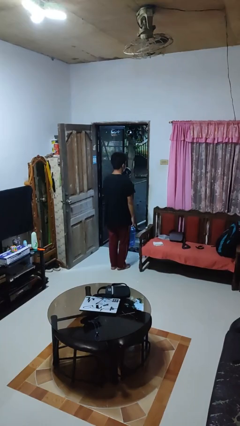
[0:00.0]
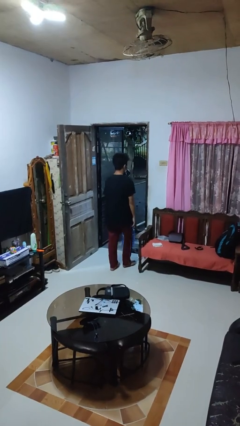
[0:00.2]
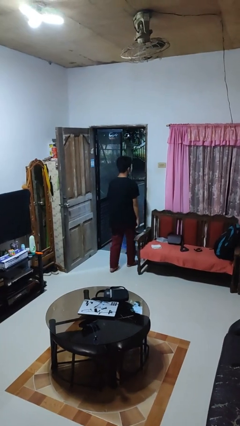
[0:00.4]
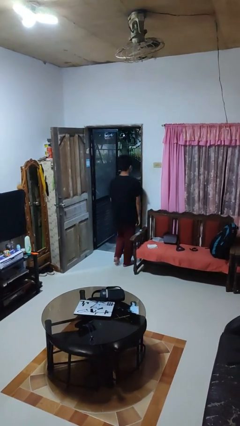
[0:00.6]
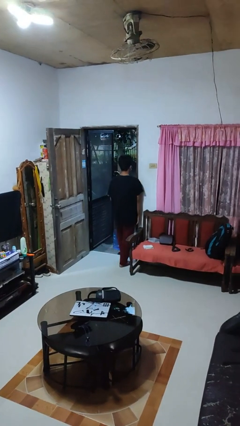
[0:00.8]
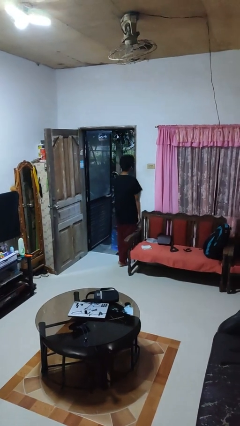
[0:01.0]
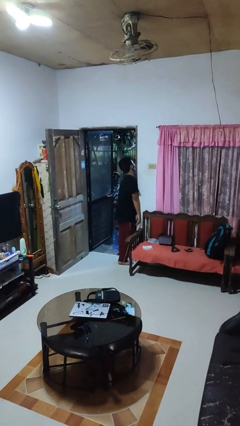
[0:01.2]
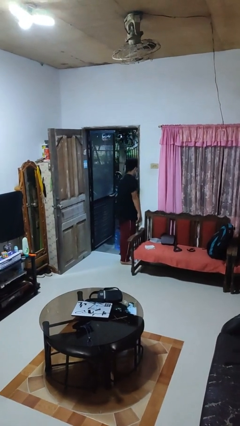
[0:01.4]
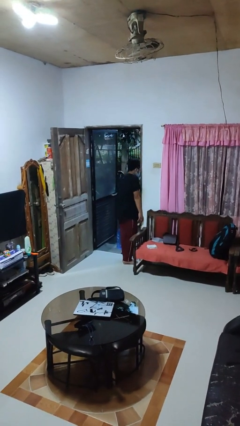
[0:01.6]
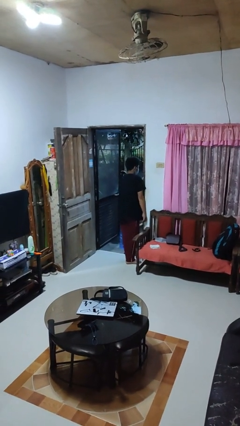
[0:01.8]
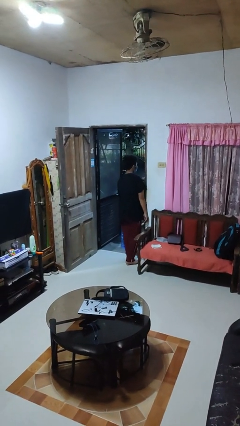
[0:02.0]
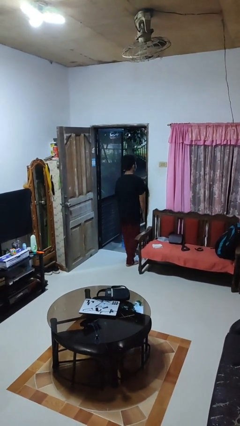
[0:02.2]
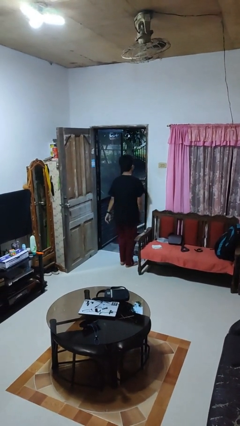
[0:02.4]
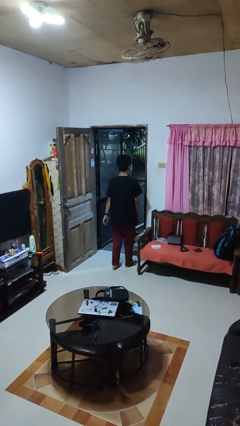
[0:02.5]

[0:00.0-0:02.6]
person bumps into wall

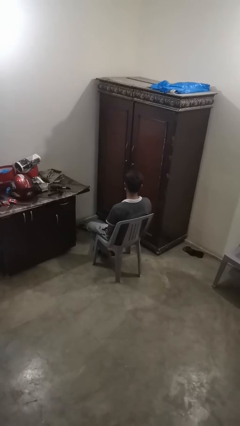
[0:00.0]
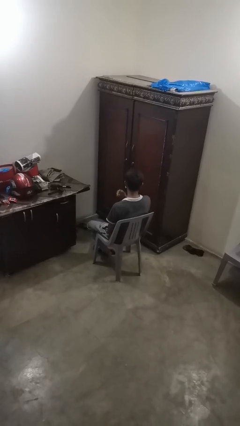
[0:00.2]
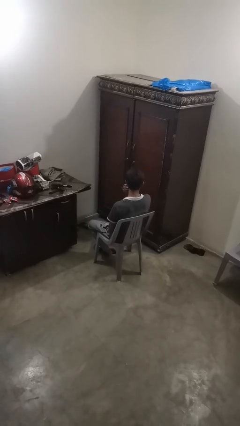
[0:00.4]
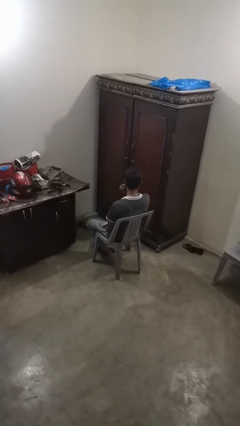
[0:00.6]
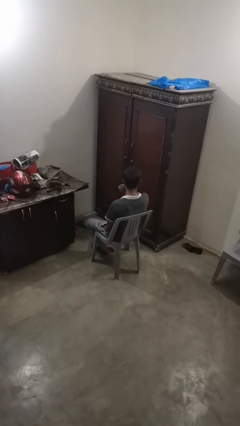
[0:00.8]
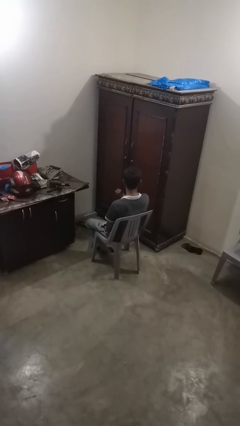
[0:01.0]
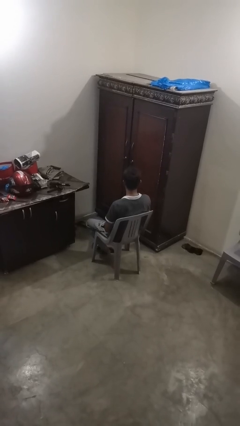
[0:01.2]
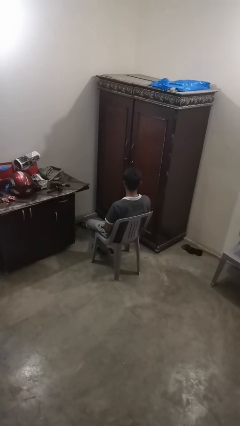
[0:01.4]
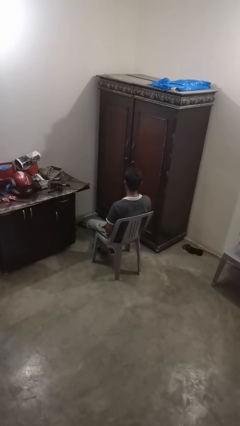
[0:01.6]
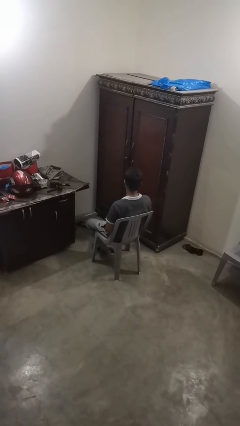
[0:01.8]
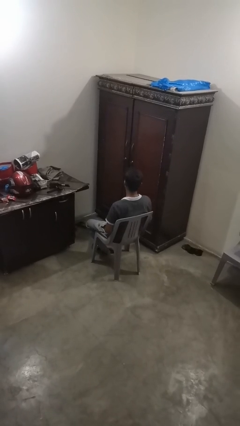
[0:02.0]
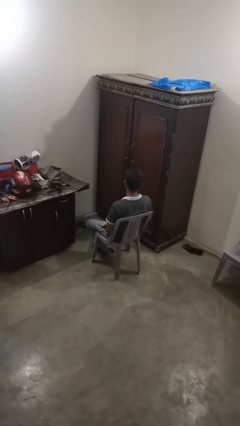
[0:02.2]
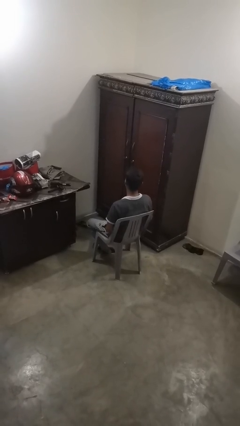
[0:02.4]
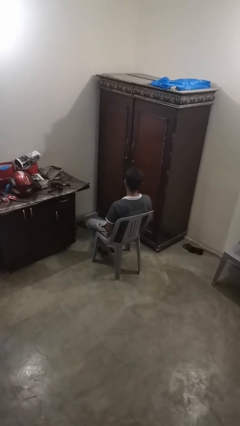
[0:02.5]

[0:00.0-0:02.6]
person takes off earrings

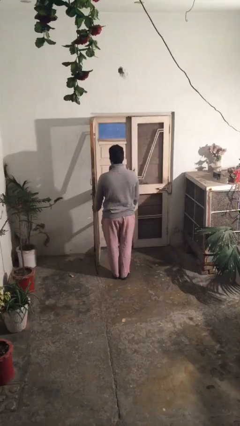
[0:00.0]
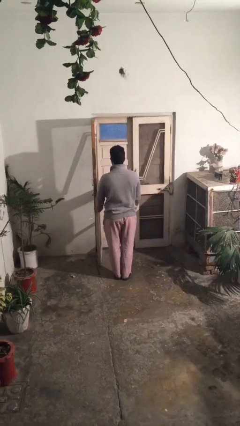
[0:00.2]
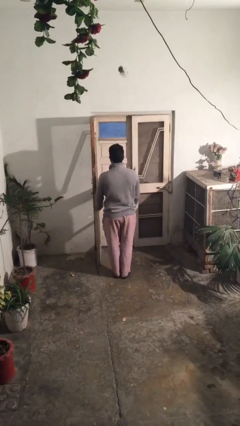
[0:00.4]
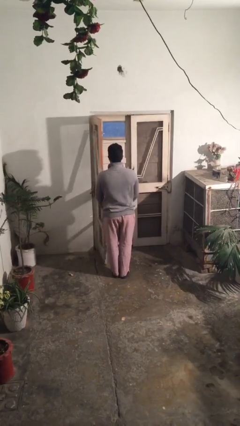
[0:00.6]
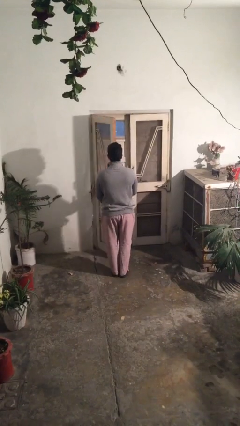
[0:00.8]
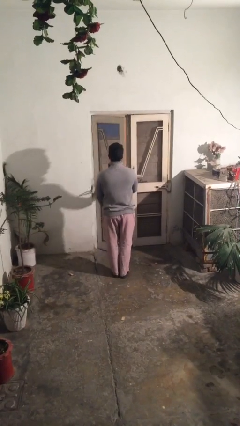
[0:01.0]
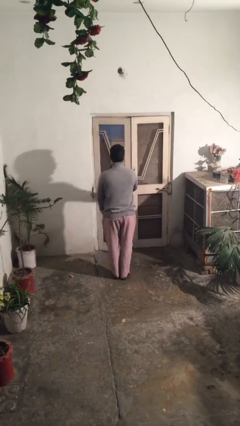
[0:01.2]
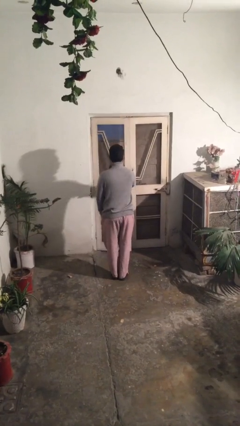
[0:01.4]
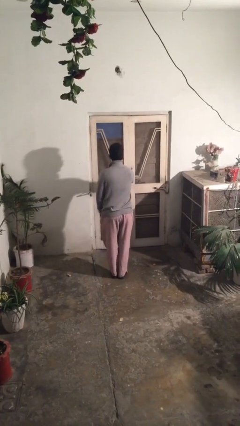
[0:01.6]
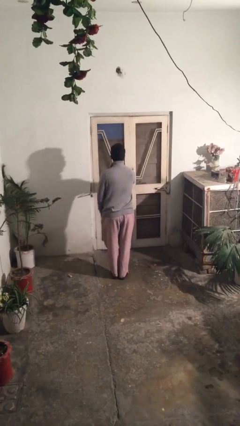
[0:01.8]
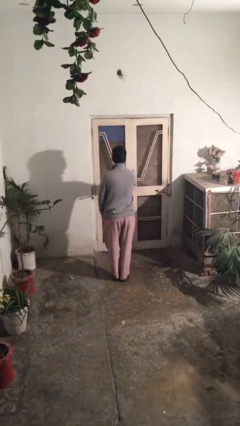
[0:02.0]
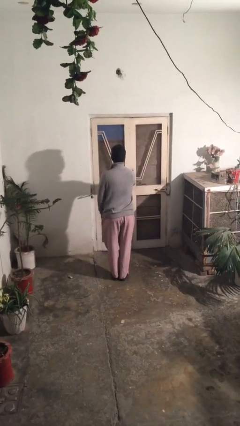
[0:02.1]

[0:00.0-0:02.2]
person closes facility door

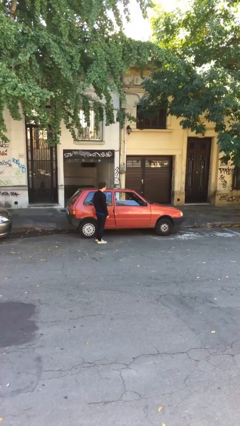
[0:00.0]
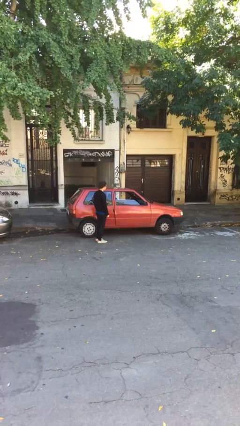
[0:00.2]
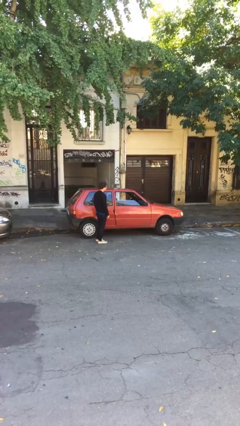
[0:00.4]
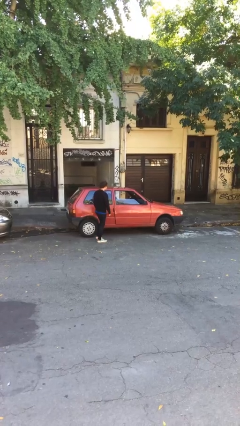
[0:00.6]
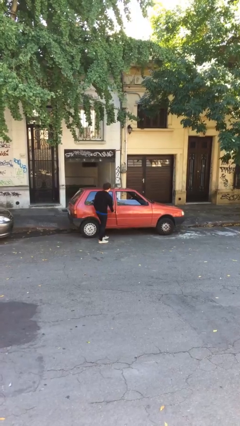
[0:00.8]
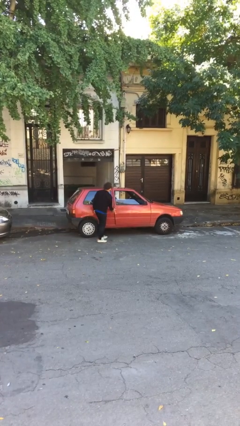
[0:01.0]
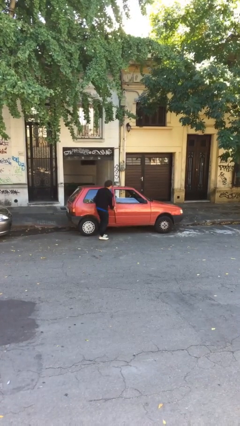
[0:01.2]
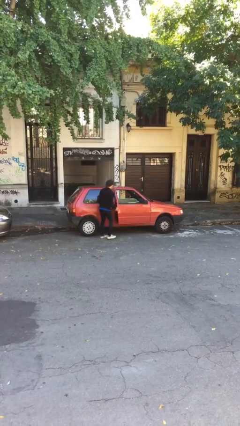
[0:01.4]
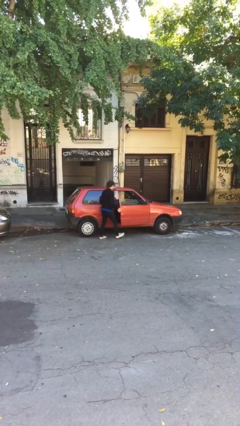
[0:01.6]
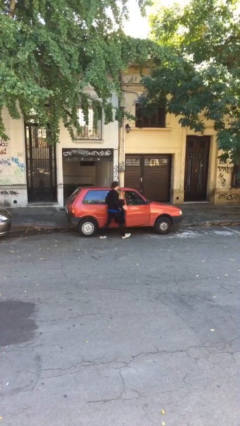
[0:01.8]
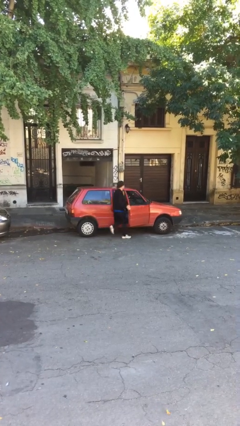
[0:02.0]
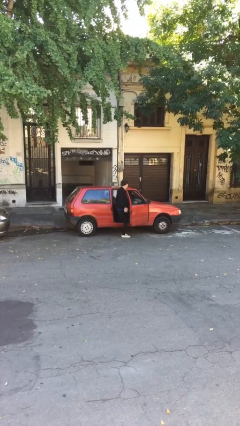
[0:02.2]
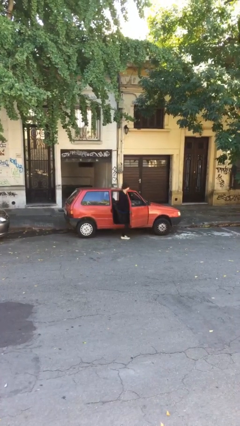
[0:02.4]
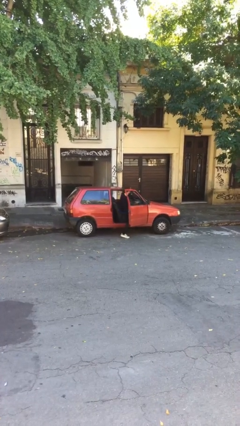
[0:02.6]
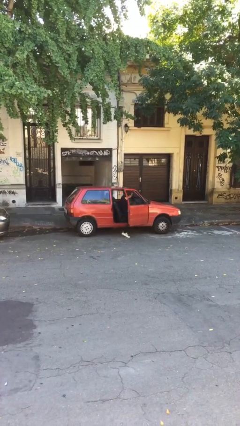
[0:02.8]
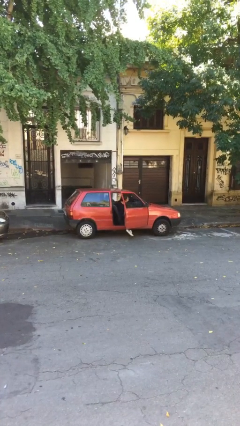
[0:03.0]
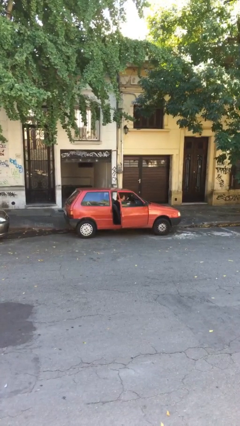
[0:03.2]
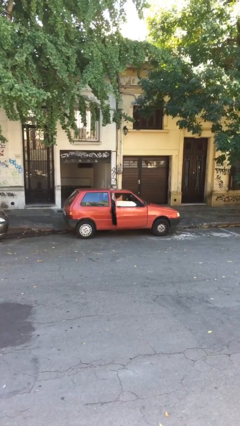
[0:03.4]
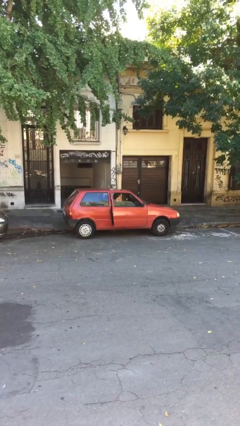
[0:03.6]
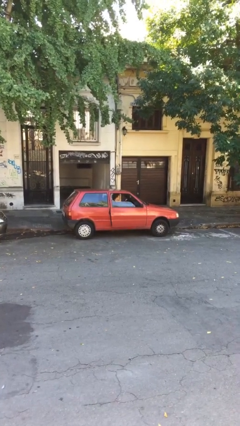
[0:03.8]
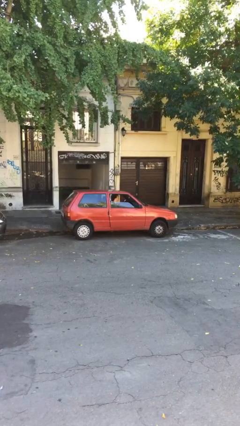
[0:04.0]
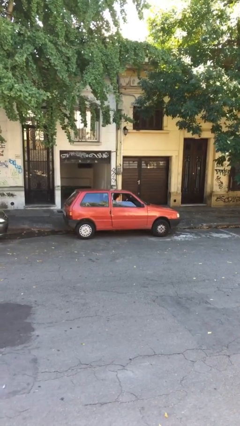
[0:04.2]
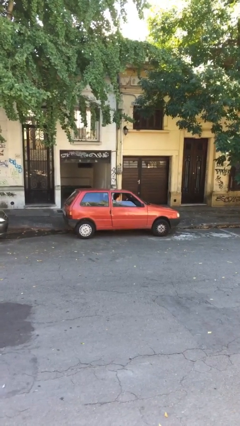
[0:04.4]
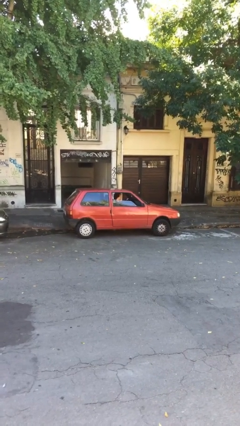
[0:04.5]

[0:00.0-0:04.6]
car picks up person

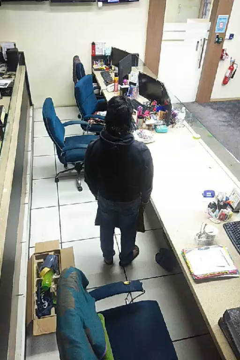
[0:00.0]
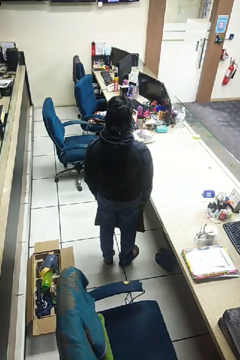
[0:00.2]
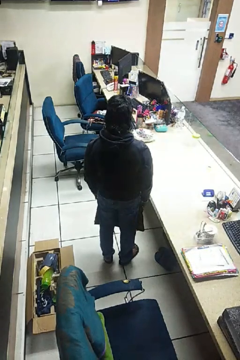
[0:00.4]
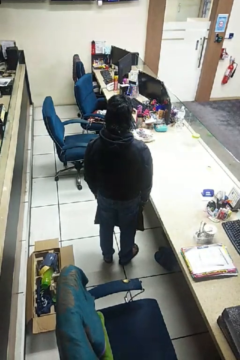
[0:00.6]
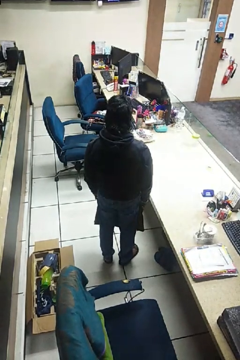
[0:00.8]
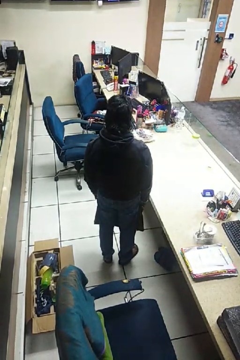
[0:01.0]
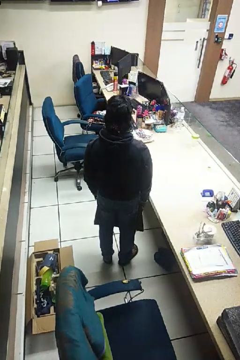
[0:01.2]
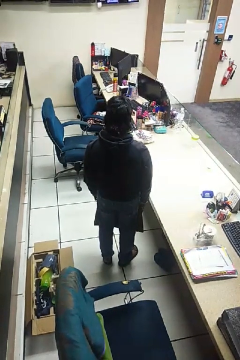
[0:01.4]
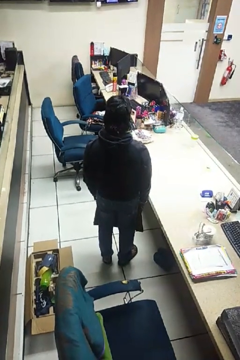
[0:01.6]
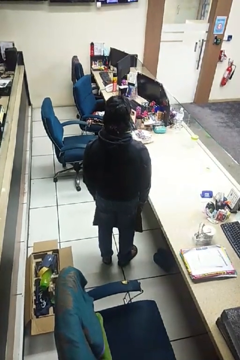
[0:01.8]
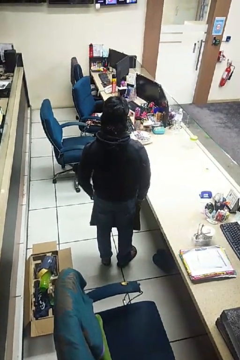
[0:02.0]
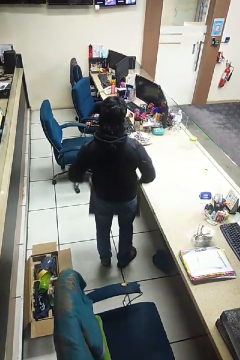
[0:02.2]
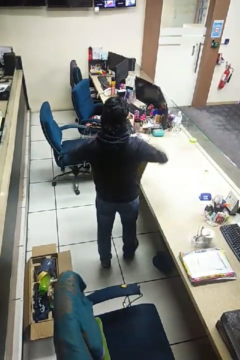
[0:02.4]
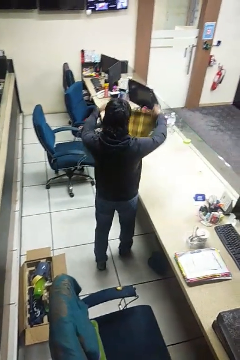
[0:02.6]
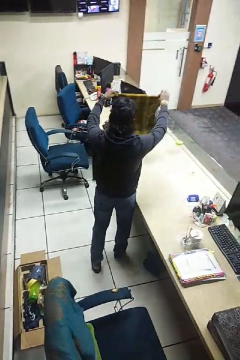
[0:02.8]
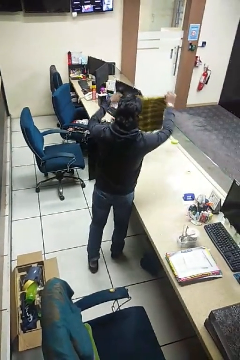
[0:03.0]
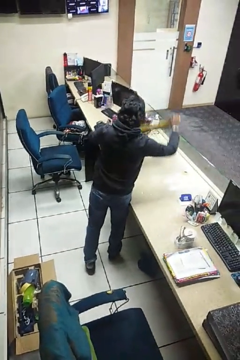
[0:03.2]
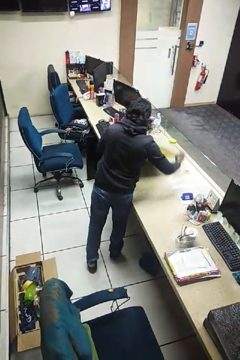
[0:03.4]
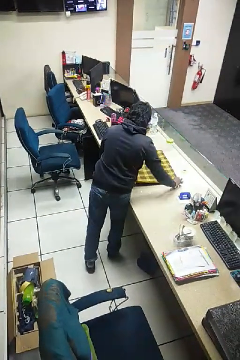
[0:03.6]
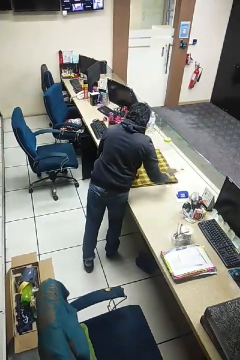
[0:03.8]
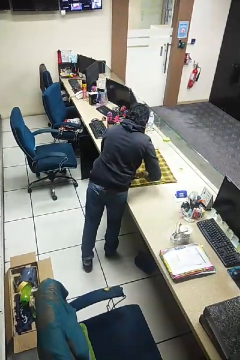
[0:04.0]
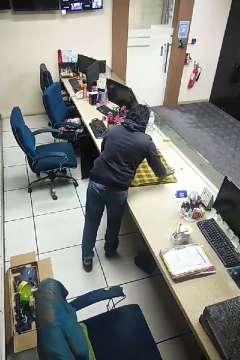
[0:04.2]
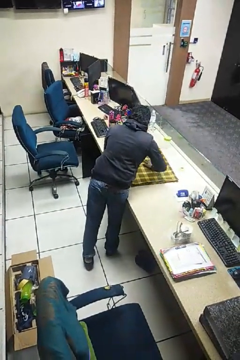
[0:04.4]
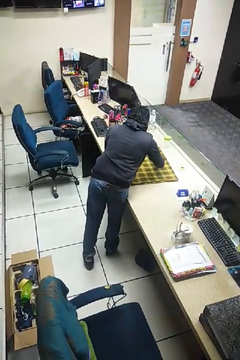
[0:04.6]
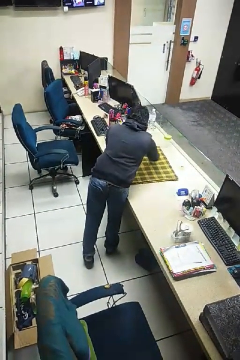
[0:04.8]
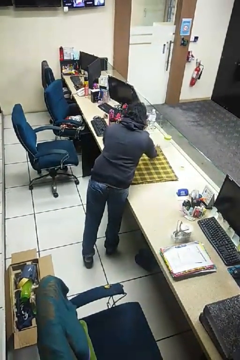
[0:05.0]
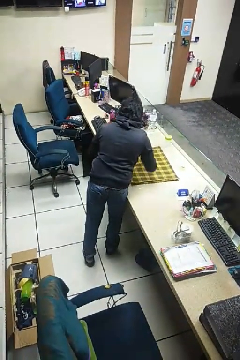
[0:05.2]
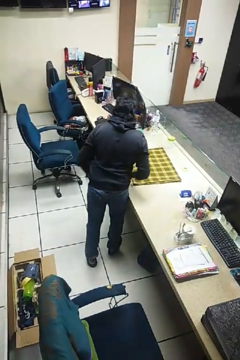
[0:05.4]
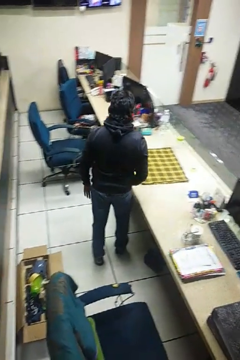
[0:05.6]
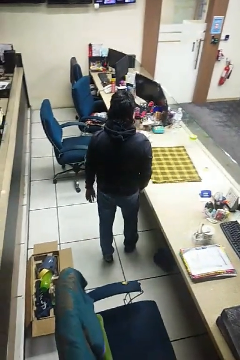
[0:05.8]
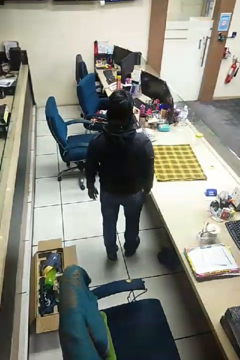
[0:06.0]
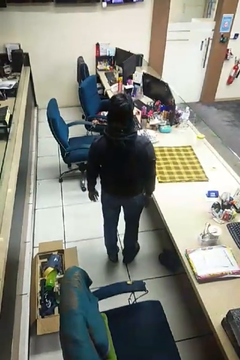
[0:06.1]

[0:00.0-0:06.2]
person spreads tablecloth

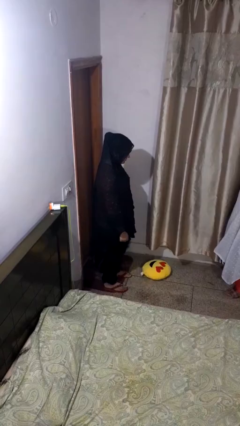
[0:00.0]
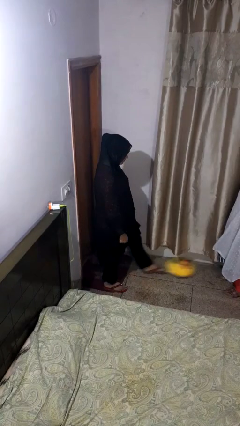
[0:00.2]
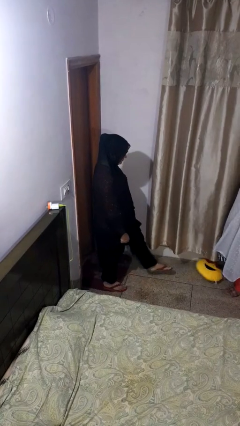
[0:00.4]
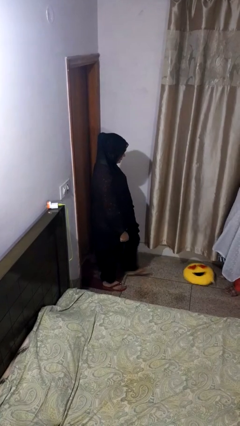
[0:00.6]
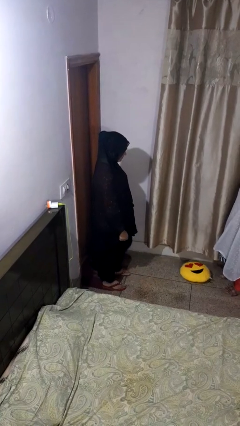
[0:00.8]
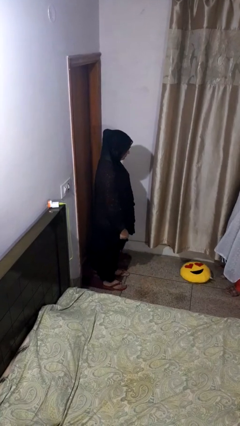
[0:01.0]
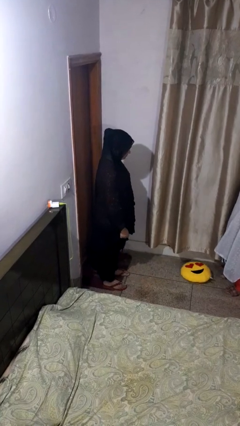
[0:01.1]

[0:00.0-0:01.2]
person kicks object to person
